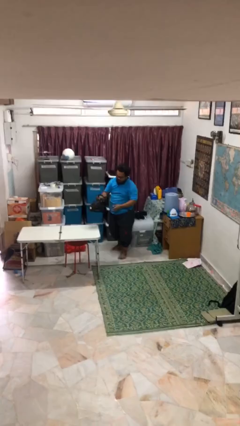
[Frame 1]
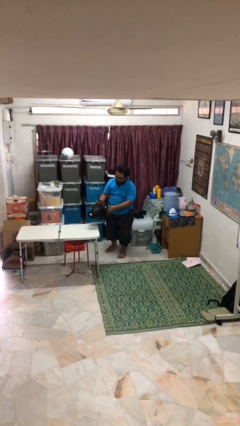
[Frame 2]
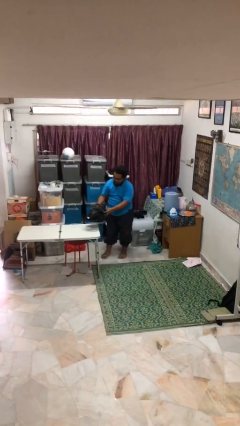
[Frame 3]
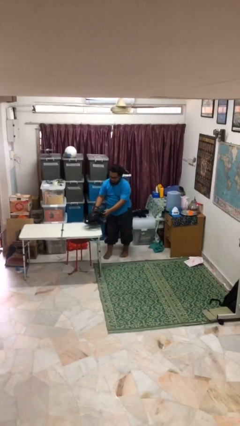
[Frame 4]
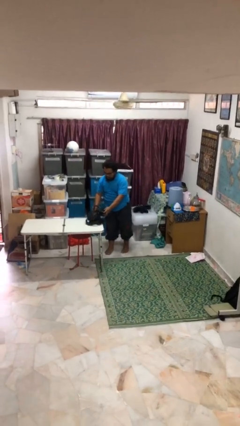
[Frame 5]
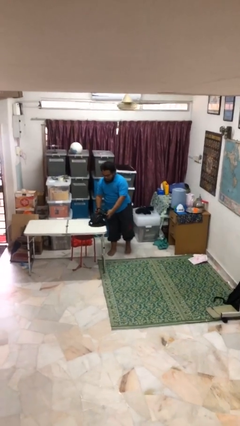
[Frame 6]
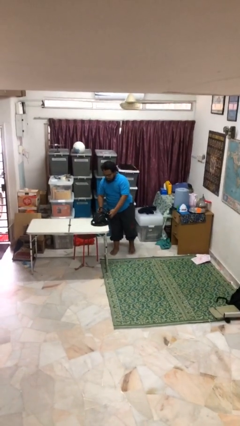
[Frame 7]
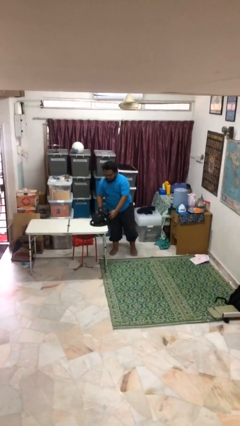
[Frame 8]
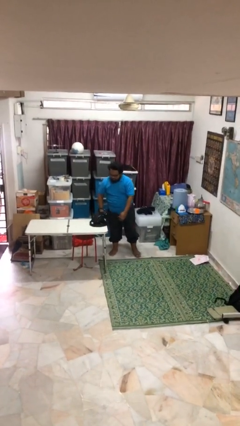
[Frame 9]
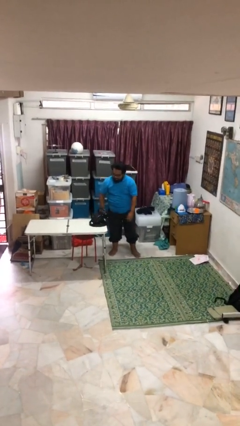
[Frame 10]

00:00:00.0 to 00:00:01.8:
person puts down object on table

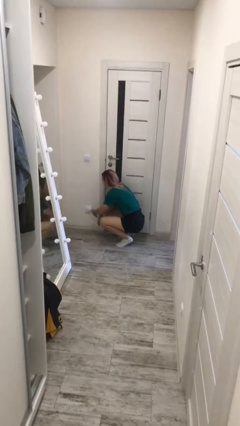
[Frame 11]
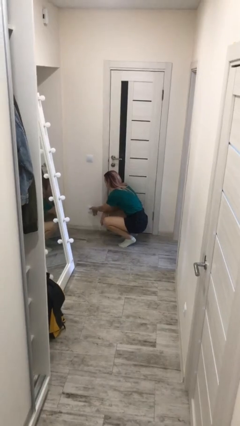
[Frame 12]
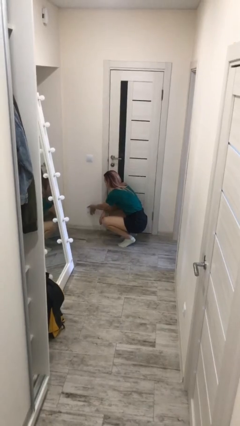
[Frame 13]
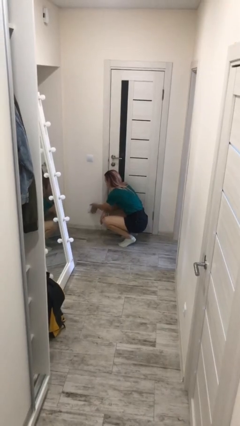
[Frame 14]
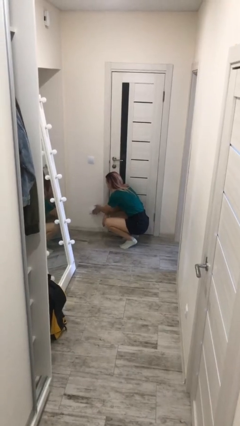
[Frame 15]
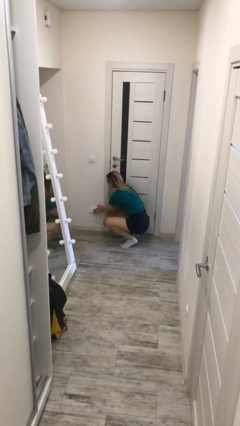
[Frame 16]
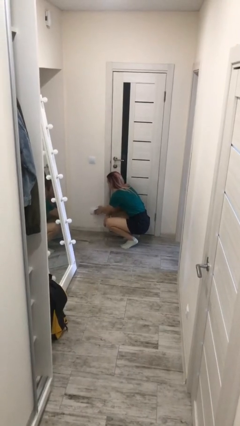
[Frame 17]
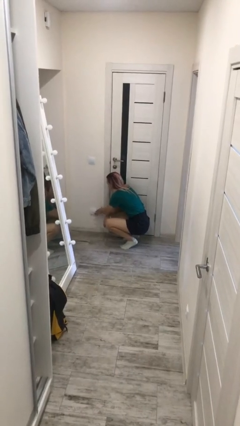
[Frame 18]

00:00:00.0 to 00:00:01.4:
person adjusts thermostat

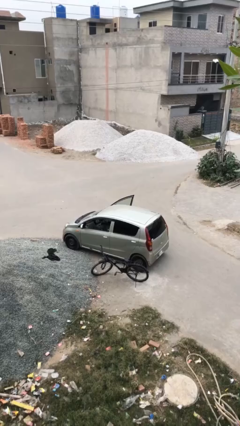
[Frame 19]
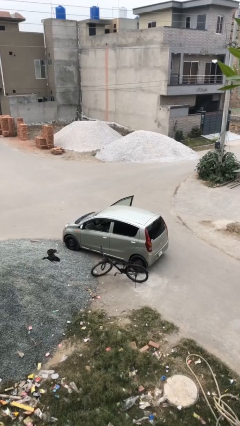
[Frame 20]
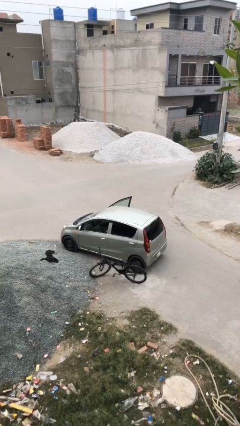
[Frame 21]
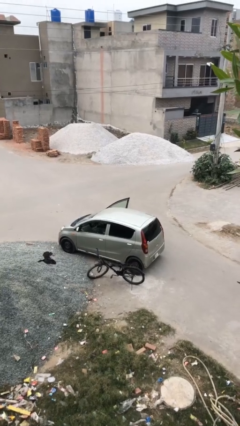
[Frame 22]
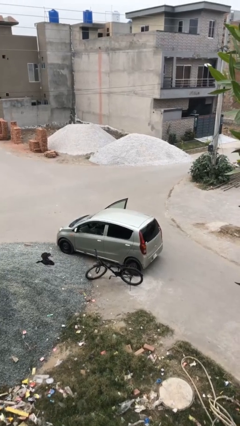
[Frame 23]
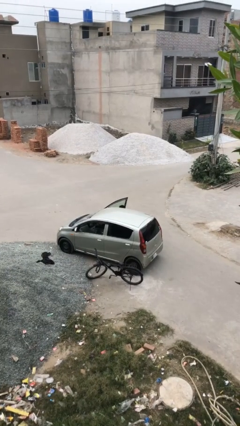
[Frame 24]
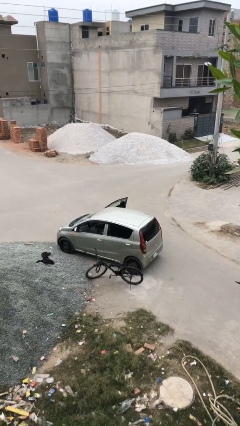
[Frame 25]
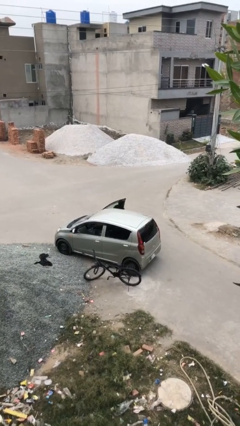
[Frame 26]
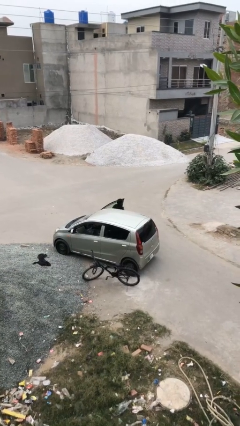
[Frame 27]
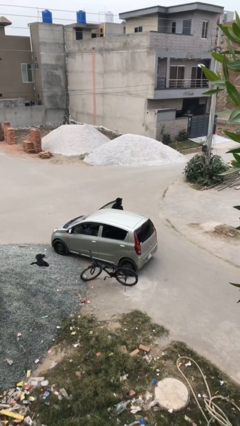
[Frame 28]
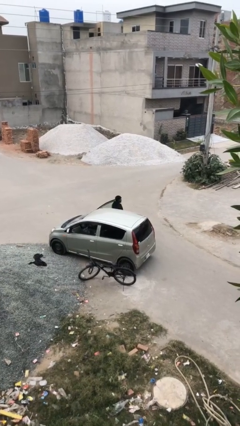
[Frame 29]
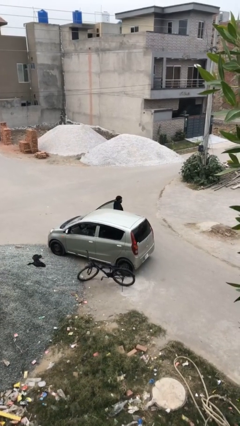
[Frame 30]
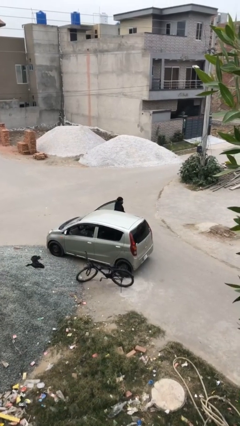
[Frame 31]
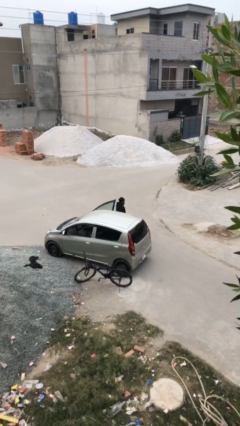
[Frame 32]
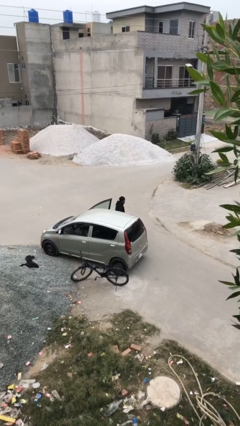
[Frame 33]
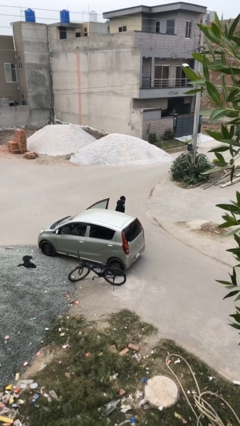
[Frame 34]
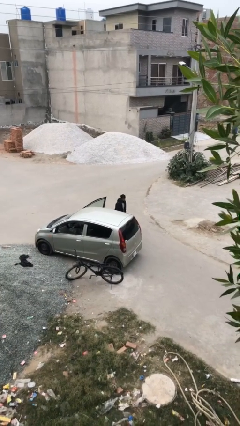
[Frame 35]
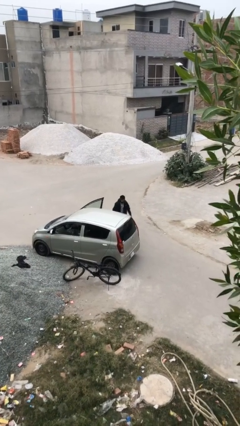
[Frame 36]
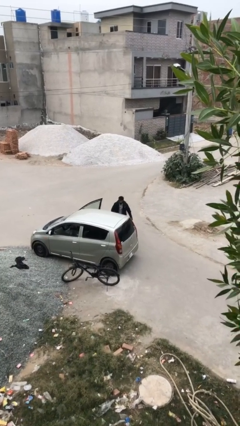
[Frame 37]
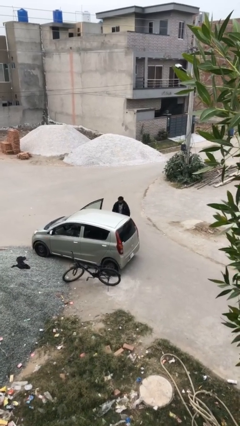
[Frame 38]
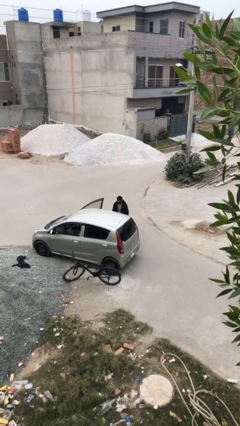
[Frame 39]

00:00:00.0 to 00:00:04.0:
person exits car

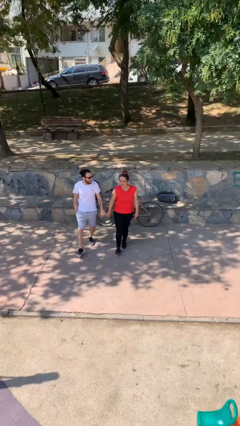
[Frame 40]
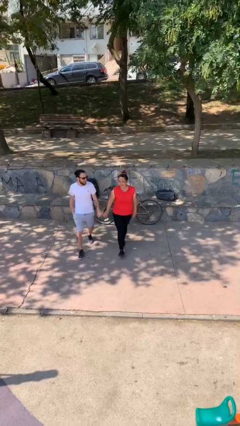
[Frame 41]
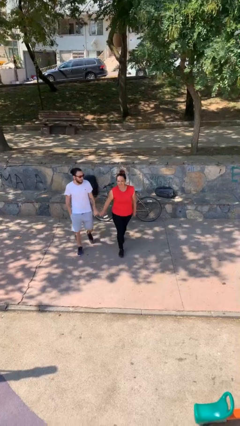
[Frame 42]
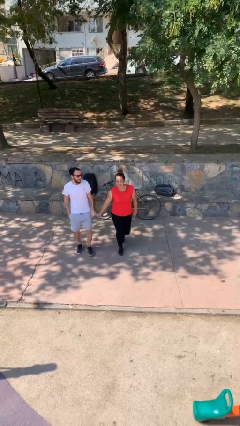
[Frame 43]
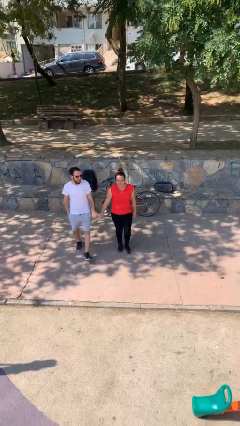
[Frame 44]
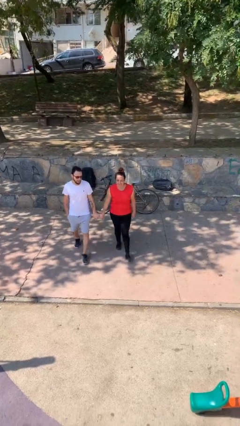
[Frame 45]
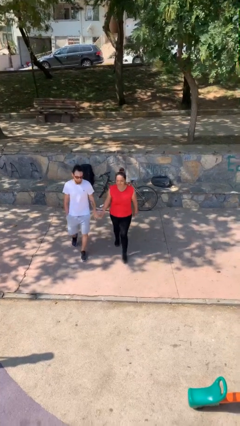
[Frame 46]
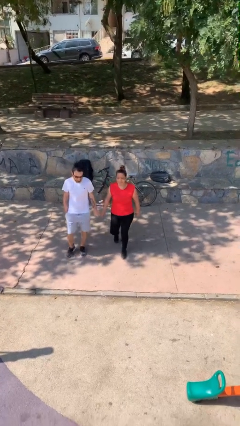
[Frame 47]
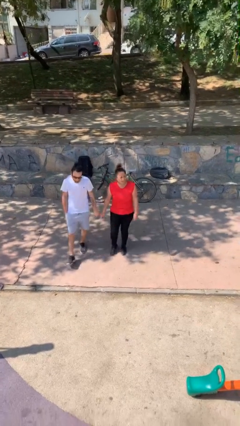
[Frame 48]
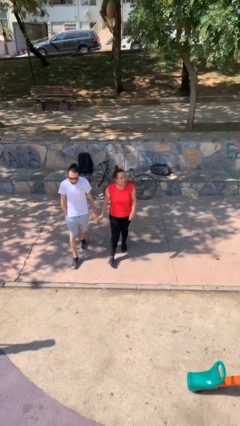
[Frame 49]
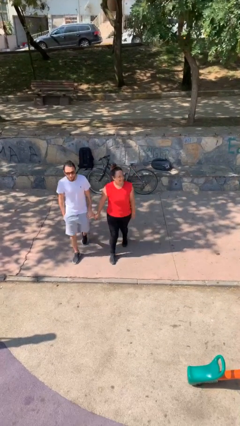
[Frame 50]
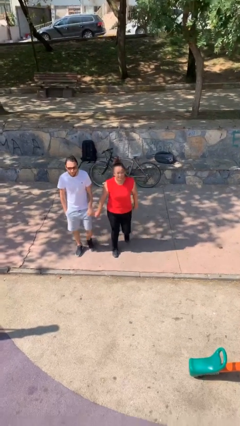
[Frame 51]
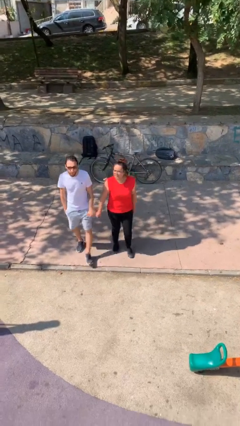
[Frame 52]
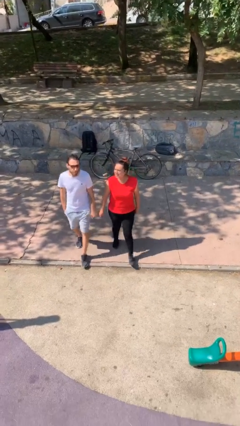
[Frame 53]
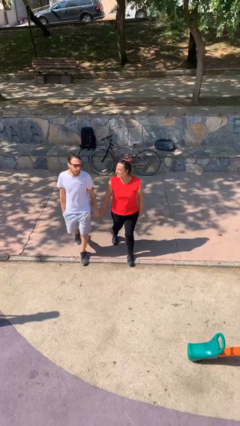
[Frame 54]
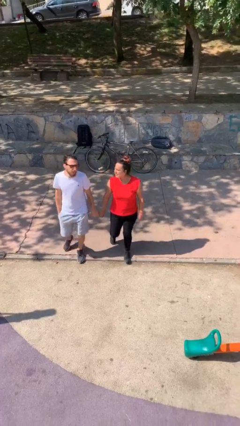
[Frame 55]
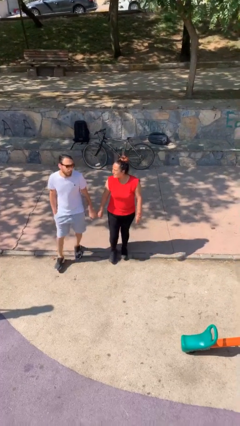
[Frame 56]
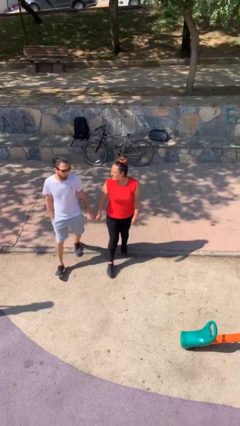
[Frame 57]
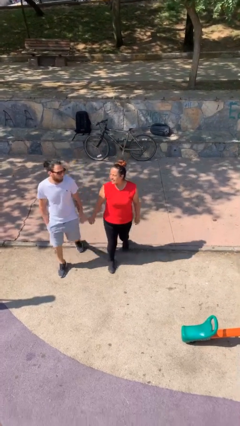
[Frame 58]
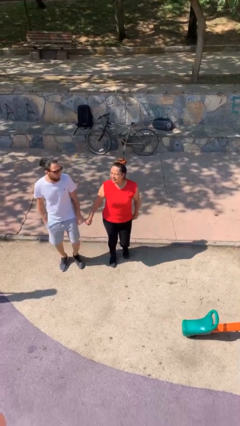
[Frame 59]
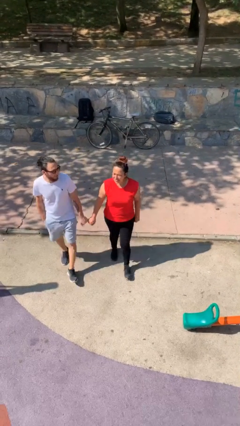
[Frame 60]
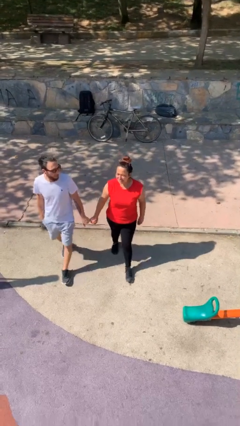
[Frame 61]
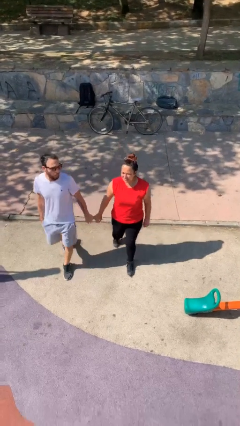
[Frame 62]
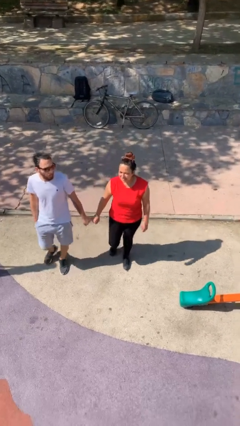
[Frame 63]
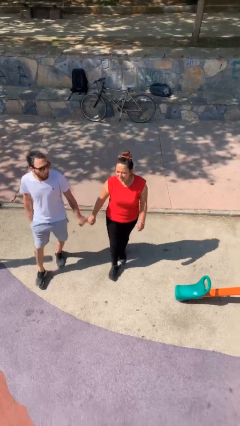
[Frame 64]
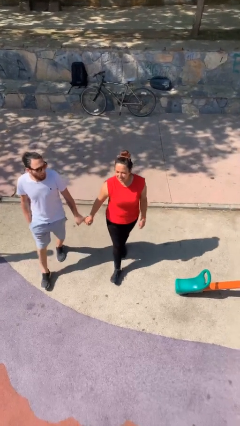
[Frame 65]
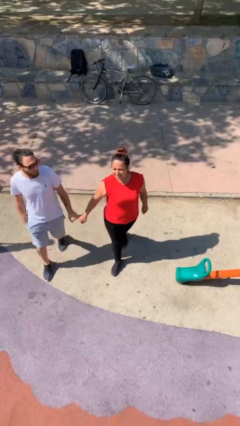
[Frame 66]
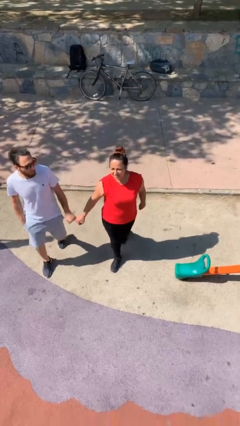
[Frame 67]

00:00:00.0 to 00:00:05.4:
person holds hand

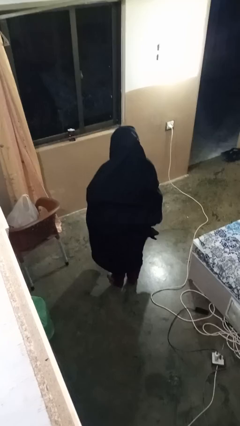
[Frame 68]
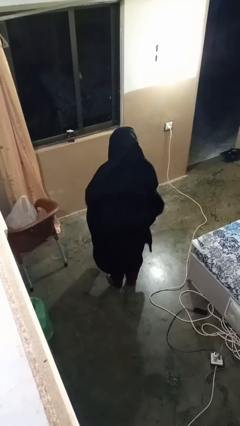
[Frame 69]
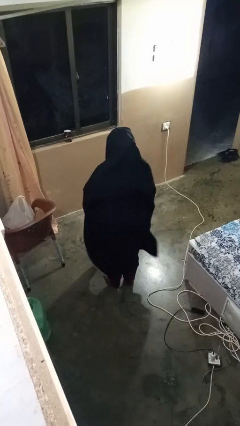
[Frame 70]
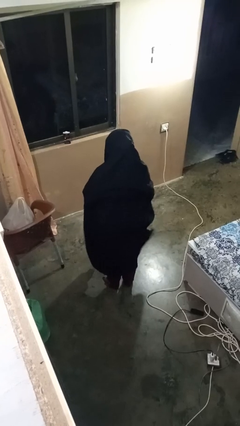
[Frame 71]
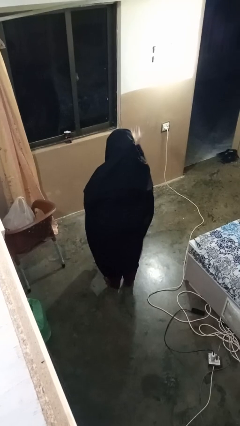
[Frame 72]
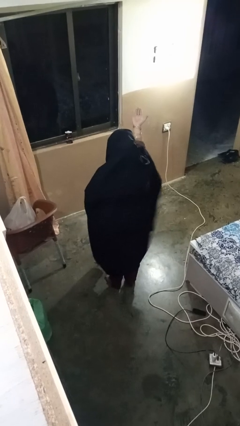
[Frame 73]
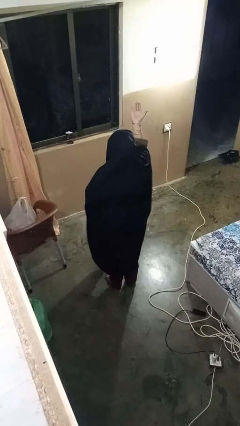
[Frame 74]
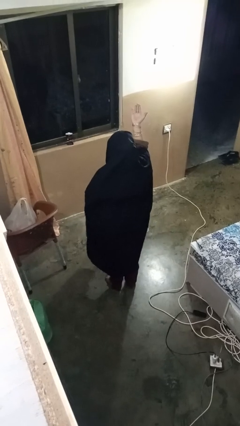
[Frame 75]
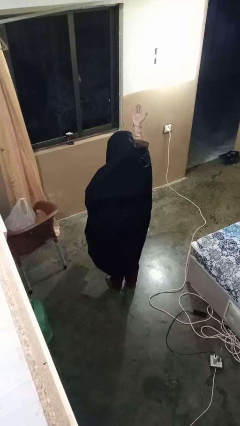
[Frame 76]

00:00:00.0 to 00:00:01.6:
person gestures swipe up

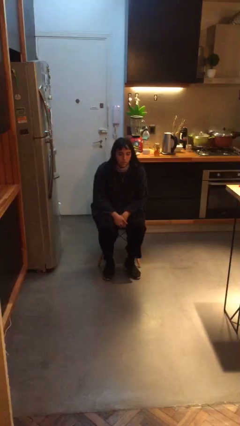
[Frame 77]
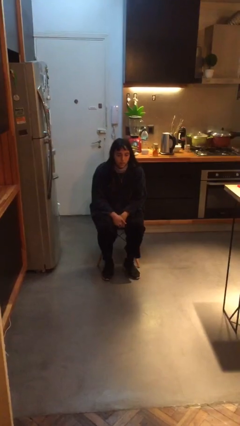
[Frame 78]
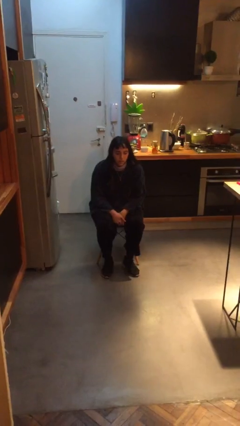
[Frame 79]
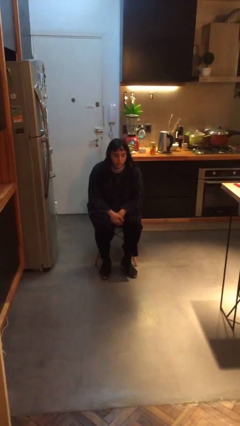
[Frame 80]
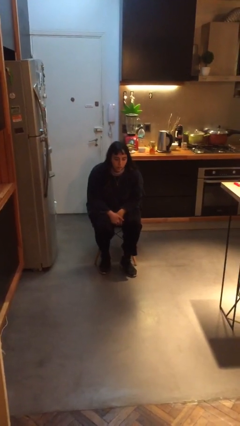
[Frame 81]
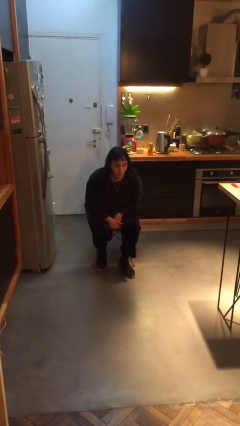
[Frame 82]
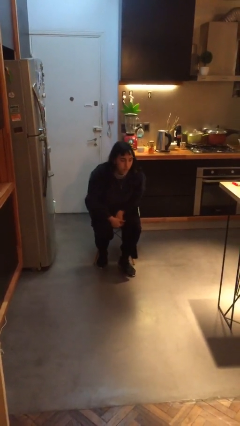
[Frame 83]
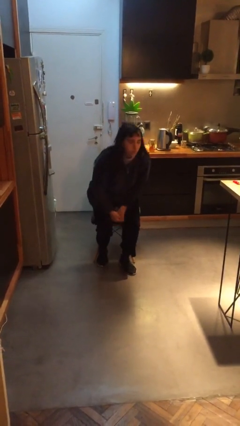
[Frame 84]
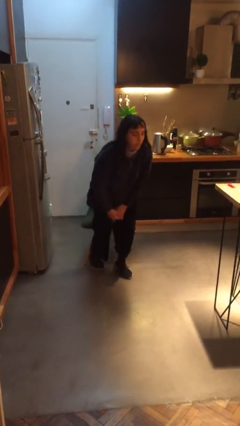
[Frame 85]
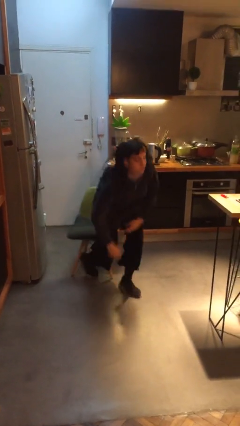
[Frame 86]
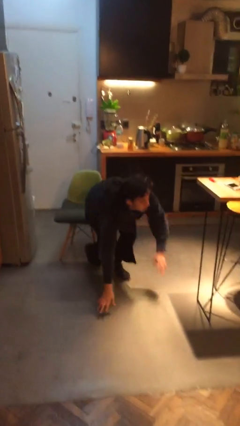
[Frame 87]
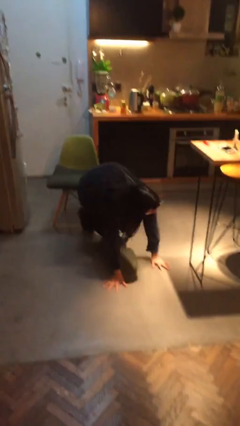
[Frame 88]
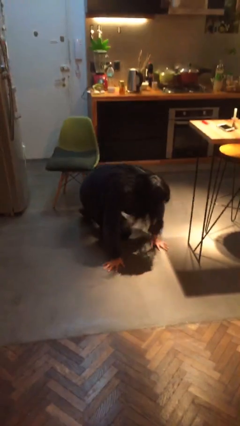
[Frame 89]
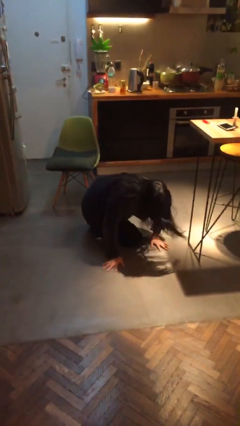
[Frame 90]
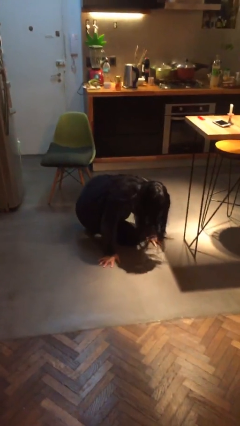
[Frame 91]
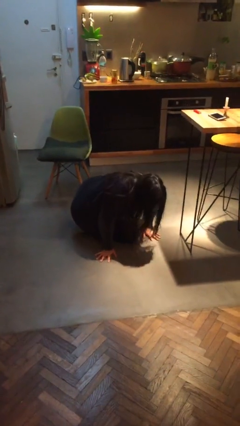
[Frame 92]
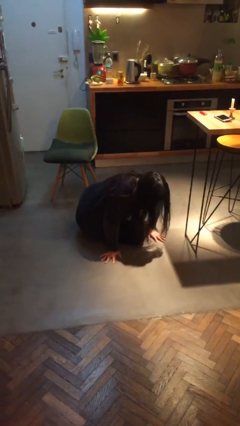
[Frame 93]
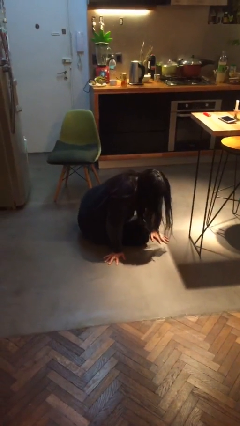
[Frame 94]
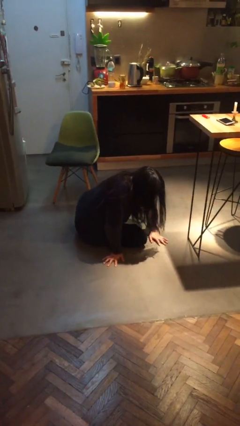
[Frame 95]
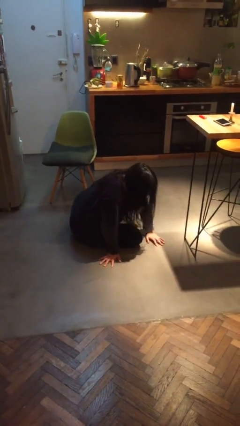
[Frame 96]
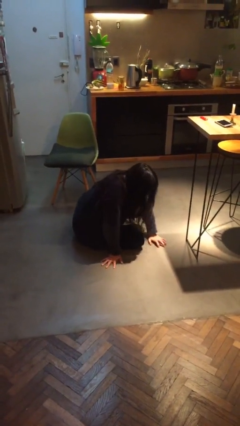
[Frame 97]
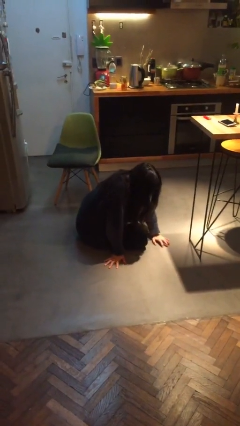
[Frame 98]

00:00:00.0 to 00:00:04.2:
person falls from chair
